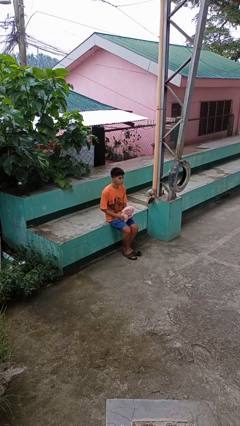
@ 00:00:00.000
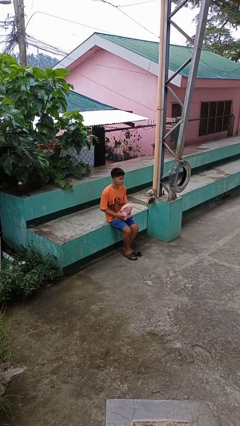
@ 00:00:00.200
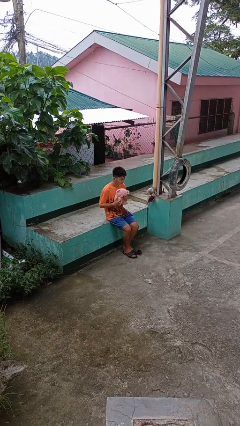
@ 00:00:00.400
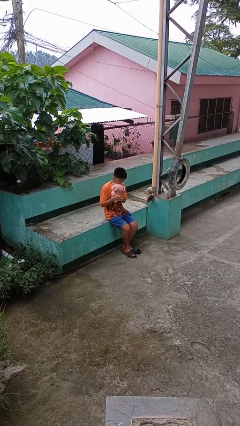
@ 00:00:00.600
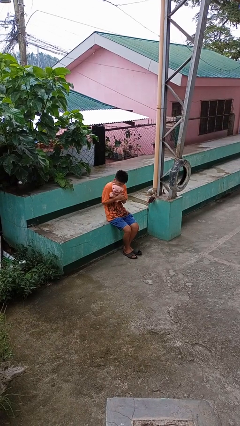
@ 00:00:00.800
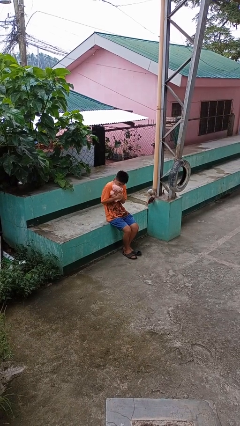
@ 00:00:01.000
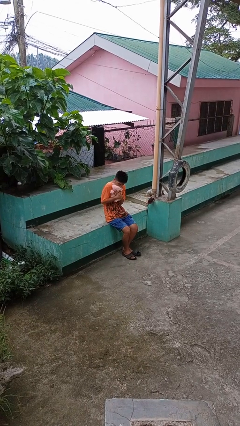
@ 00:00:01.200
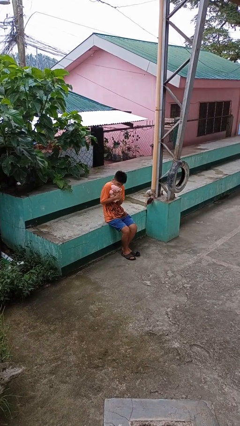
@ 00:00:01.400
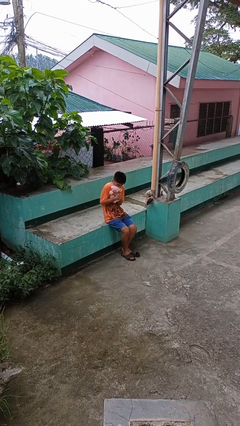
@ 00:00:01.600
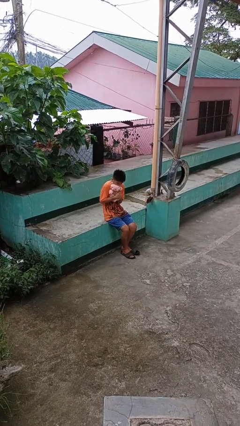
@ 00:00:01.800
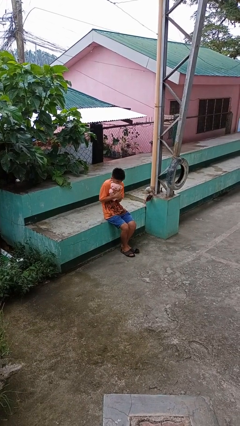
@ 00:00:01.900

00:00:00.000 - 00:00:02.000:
person hugs stuffed animal

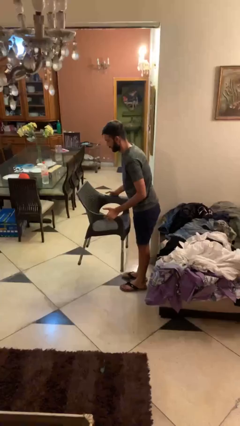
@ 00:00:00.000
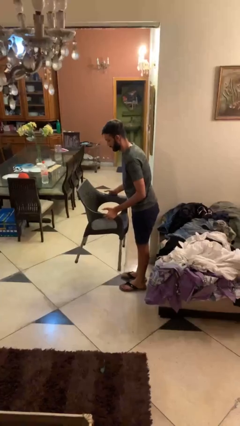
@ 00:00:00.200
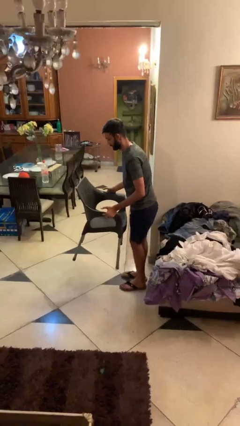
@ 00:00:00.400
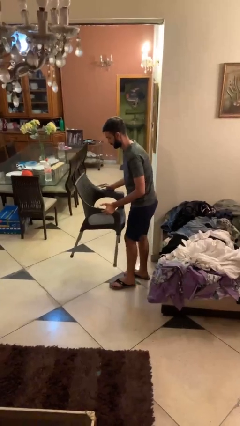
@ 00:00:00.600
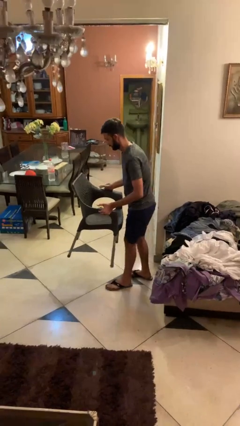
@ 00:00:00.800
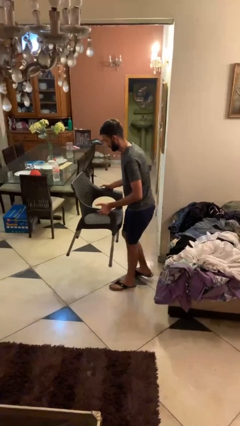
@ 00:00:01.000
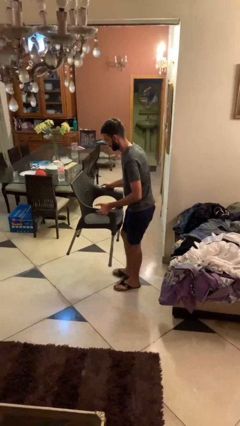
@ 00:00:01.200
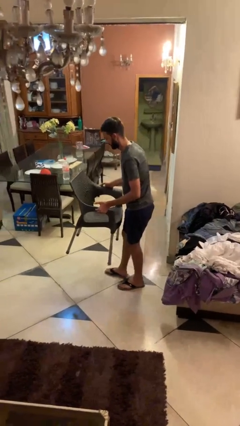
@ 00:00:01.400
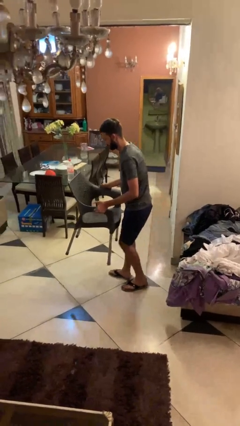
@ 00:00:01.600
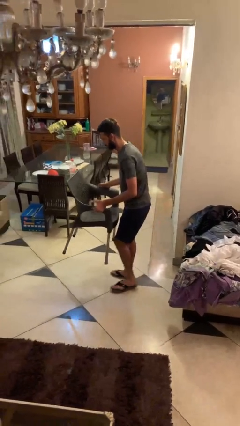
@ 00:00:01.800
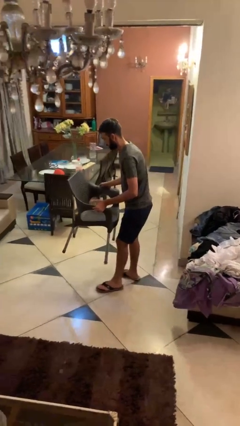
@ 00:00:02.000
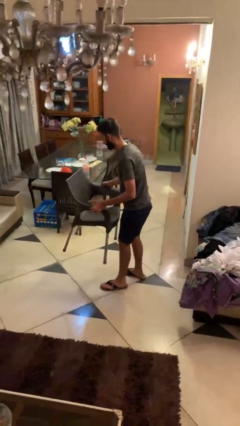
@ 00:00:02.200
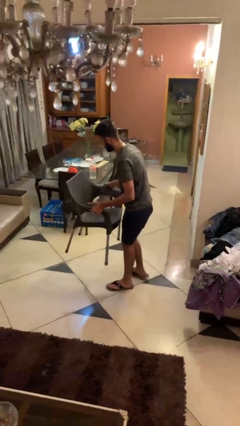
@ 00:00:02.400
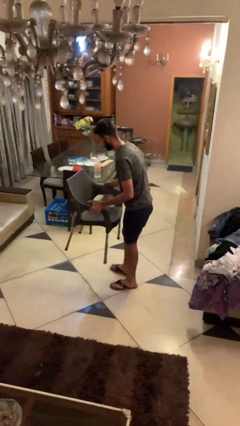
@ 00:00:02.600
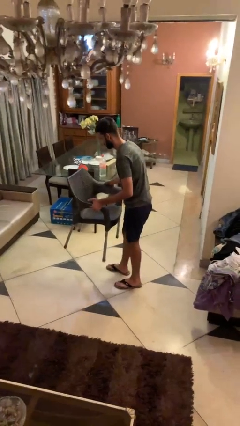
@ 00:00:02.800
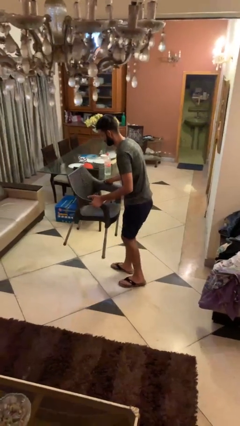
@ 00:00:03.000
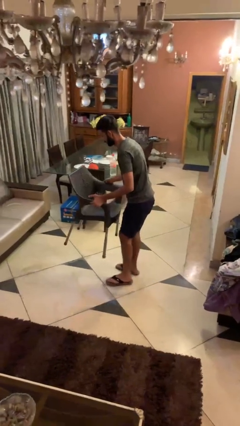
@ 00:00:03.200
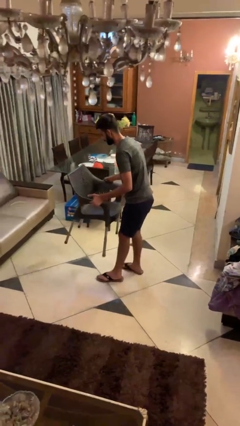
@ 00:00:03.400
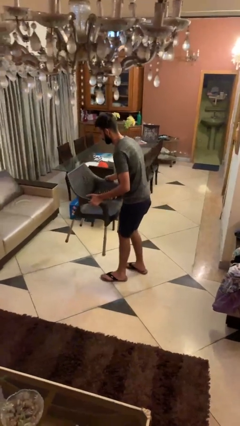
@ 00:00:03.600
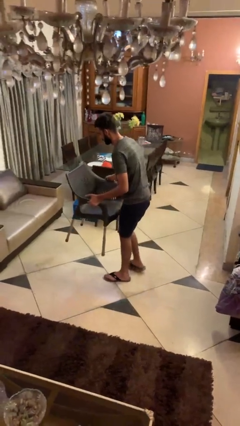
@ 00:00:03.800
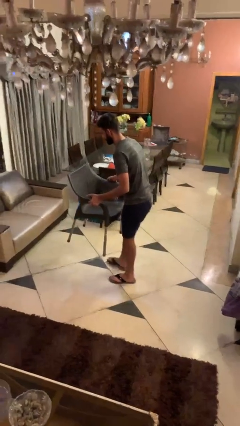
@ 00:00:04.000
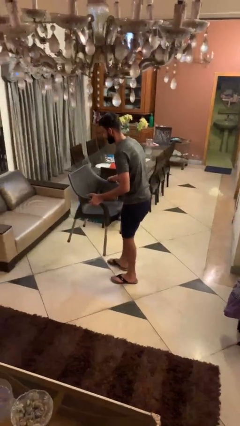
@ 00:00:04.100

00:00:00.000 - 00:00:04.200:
person carries heavy object

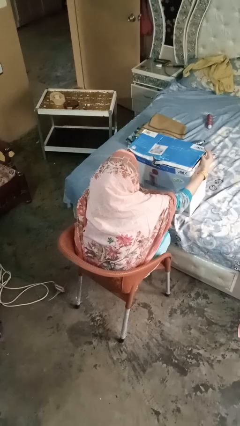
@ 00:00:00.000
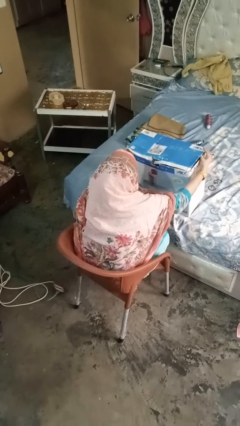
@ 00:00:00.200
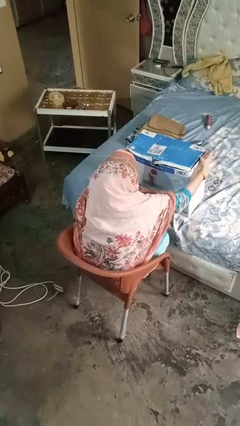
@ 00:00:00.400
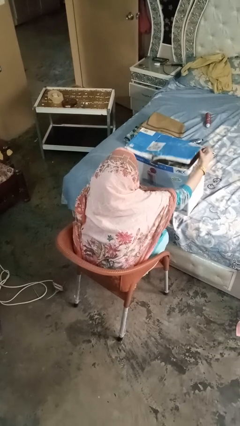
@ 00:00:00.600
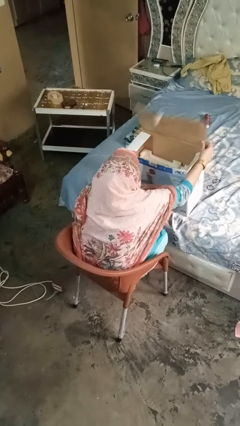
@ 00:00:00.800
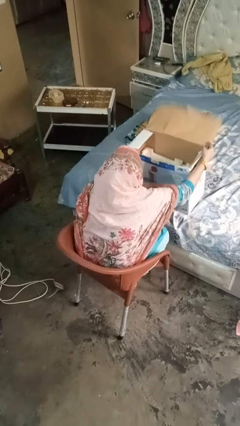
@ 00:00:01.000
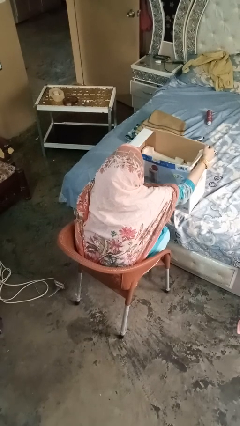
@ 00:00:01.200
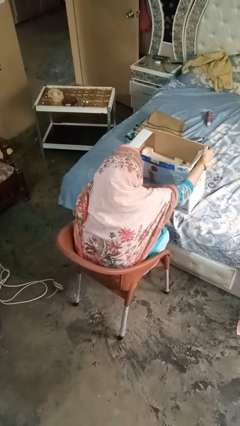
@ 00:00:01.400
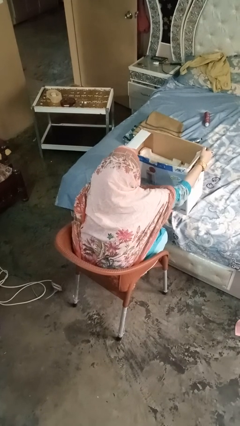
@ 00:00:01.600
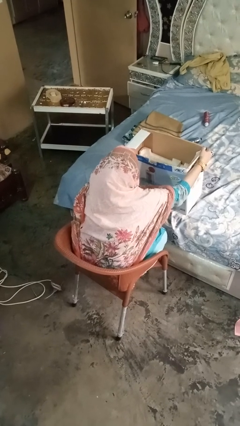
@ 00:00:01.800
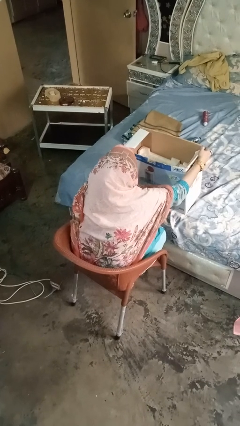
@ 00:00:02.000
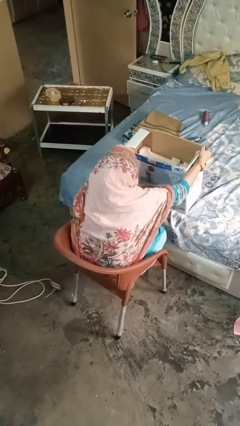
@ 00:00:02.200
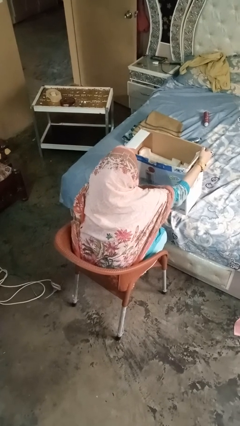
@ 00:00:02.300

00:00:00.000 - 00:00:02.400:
person opens box

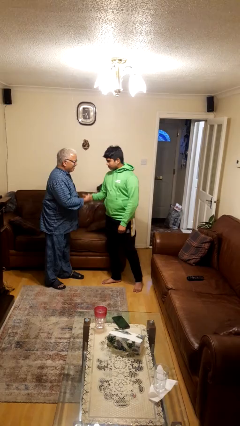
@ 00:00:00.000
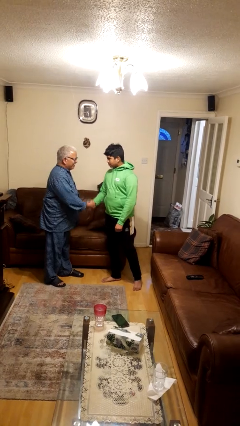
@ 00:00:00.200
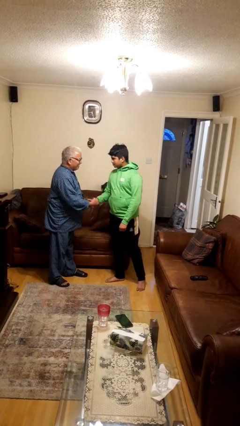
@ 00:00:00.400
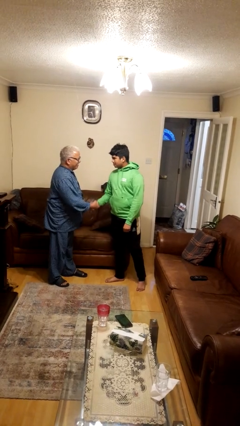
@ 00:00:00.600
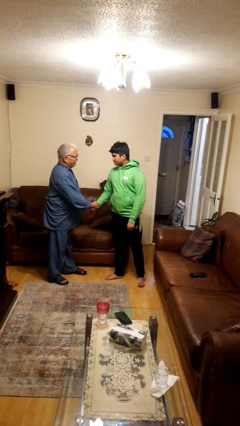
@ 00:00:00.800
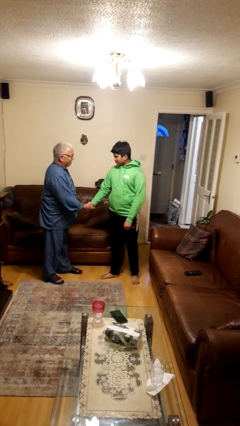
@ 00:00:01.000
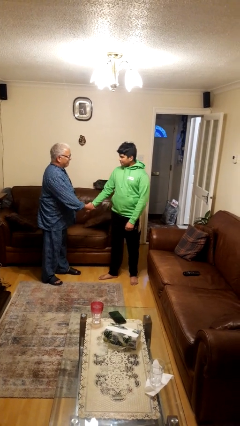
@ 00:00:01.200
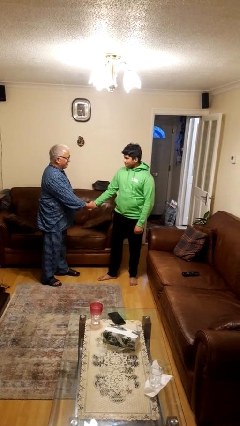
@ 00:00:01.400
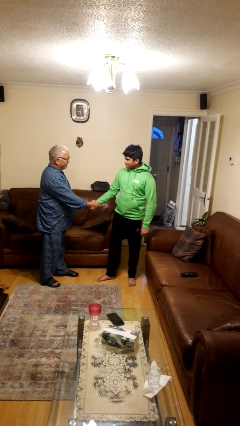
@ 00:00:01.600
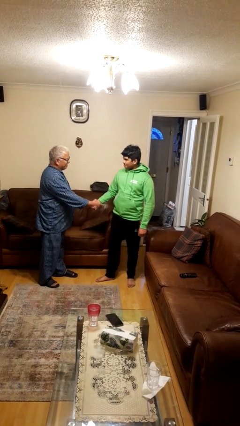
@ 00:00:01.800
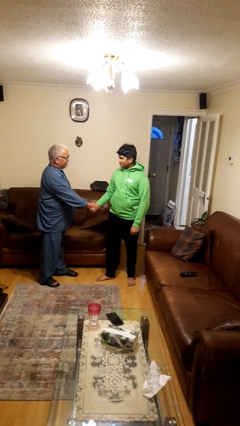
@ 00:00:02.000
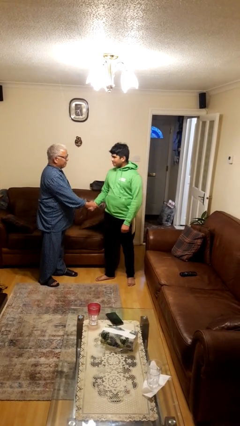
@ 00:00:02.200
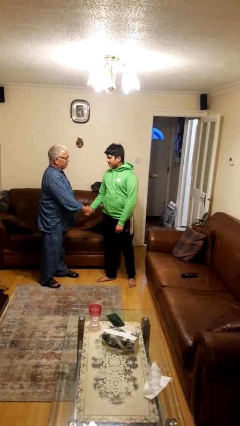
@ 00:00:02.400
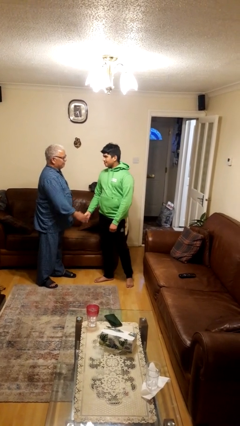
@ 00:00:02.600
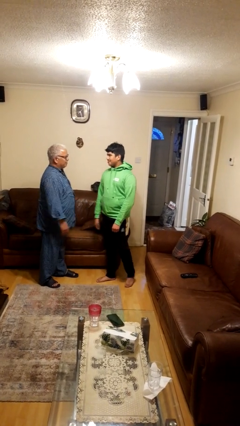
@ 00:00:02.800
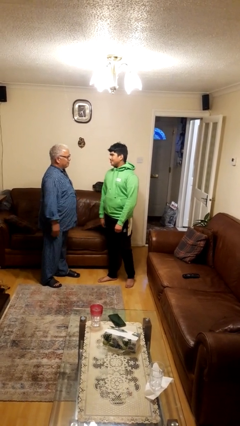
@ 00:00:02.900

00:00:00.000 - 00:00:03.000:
person highfives hand

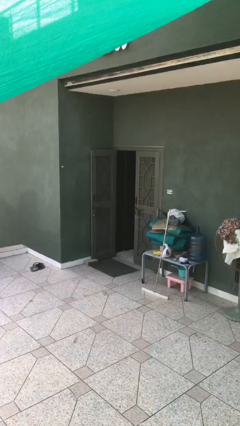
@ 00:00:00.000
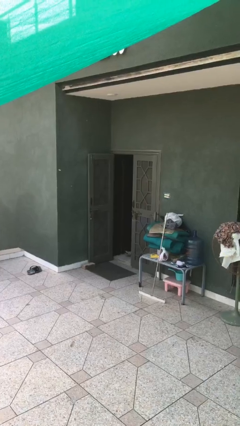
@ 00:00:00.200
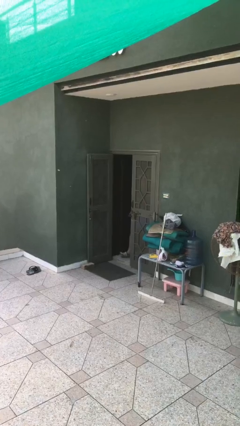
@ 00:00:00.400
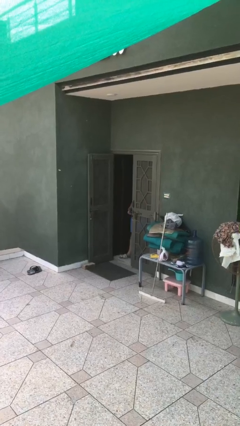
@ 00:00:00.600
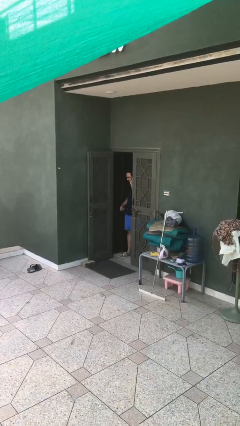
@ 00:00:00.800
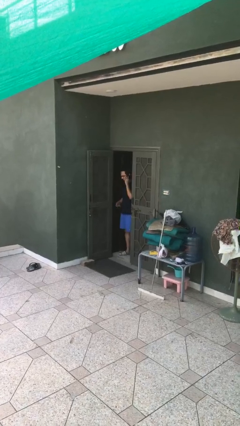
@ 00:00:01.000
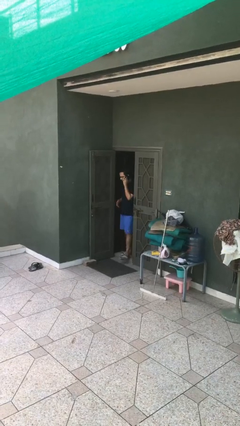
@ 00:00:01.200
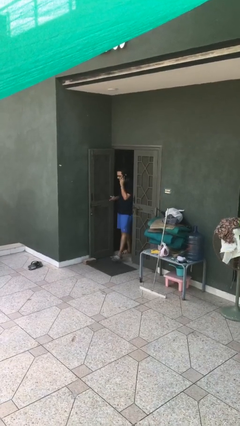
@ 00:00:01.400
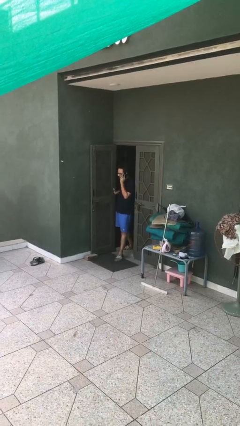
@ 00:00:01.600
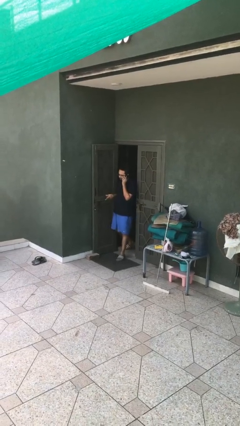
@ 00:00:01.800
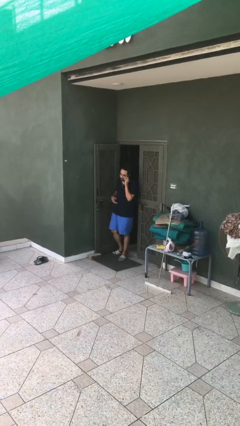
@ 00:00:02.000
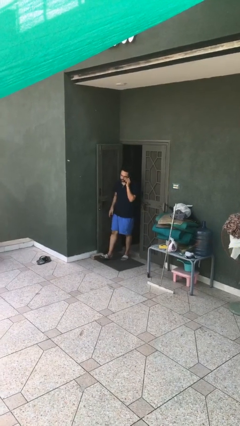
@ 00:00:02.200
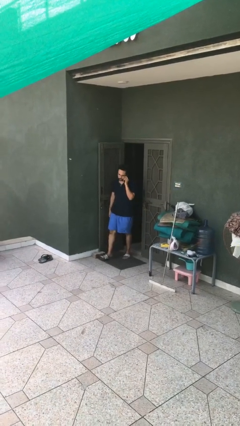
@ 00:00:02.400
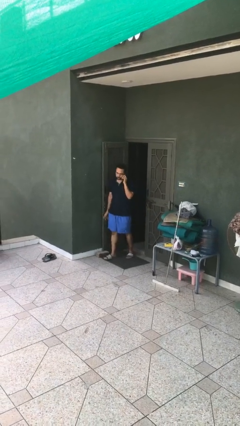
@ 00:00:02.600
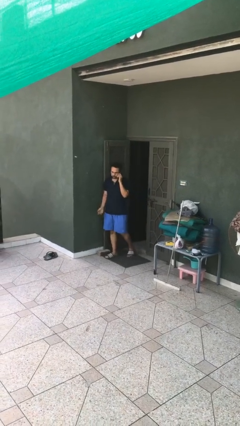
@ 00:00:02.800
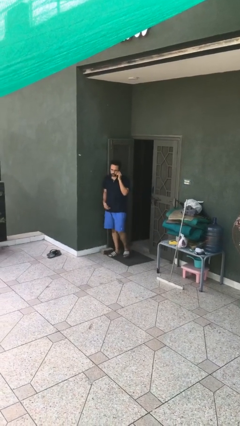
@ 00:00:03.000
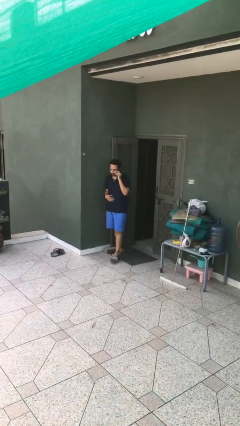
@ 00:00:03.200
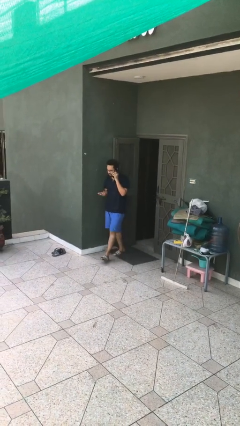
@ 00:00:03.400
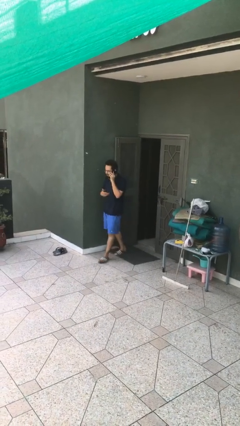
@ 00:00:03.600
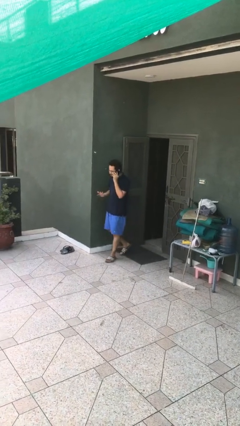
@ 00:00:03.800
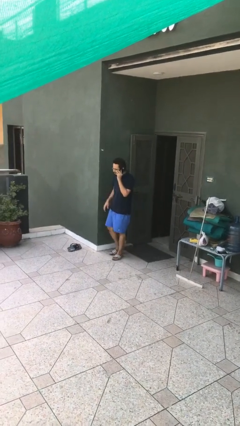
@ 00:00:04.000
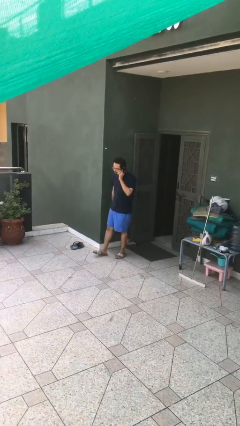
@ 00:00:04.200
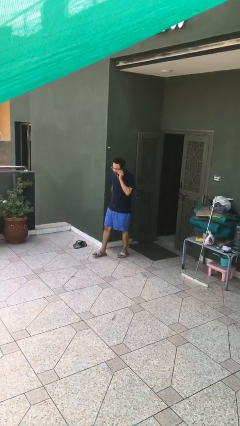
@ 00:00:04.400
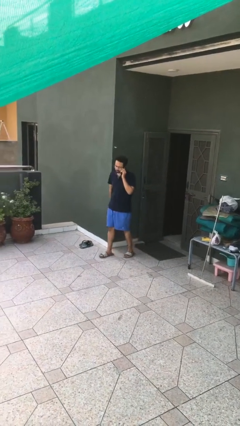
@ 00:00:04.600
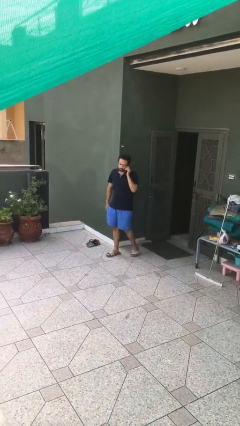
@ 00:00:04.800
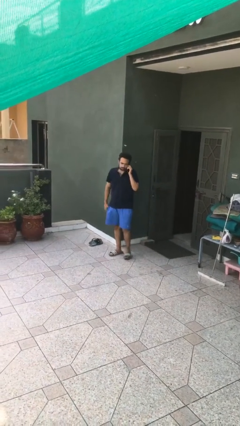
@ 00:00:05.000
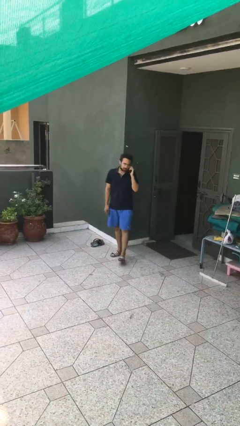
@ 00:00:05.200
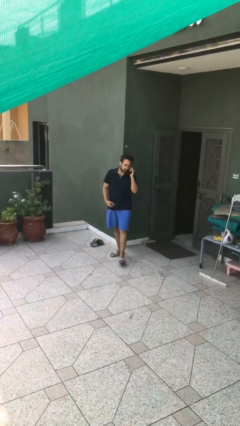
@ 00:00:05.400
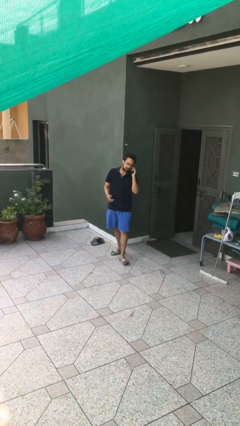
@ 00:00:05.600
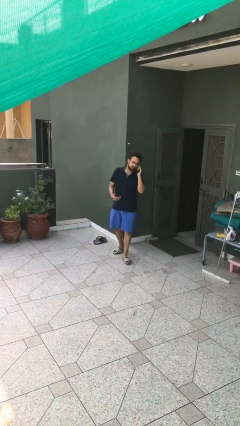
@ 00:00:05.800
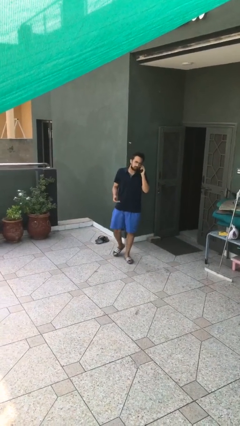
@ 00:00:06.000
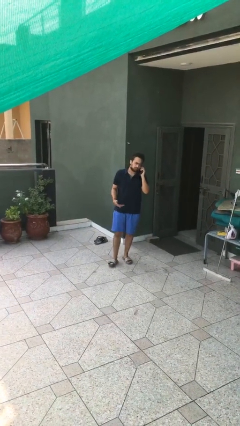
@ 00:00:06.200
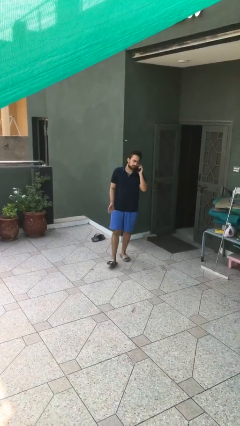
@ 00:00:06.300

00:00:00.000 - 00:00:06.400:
person enters scene through structure
